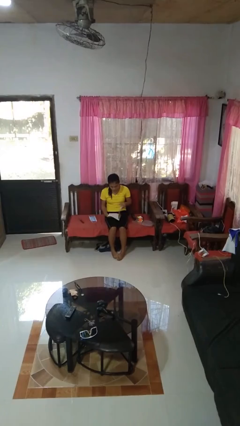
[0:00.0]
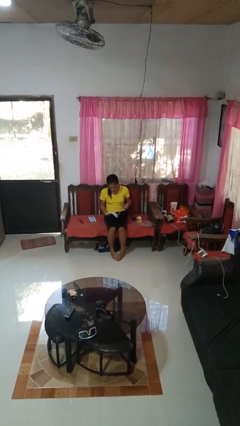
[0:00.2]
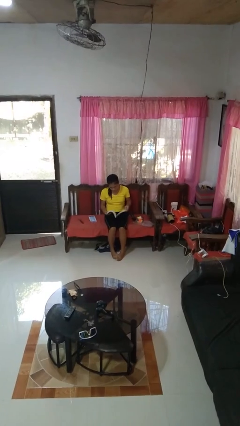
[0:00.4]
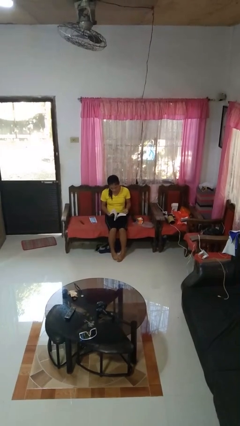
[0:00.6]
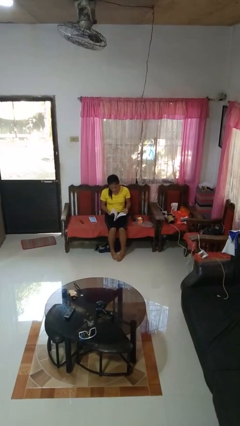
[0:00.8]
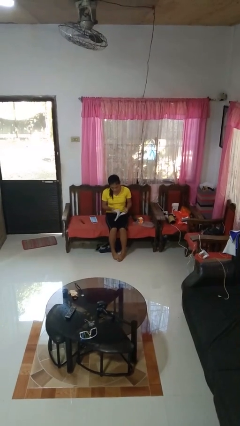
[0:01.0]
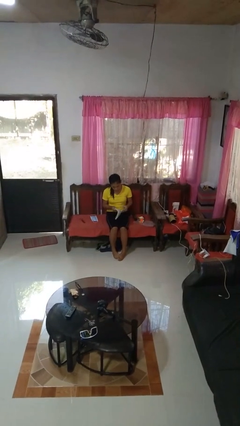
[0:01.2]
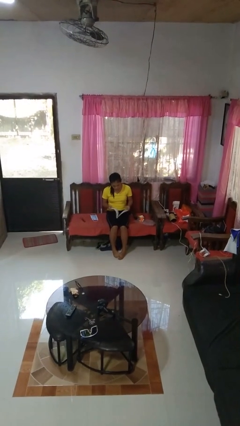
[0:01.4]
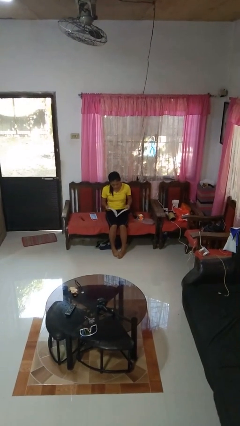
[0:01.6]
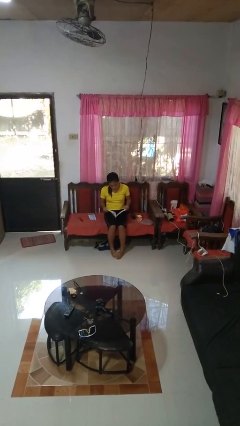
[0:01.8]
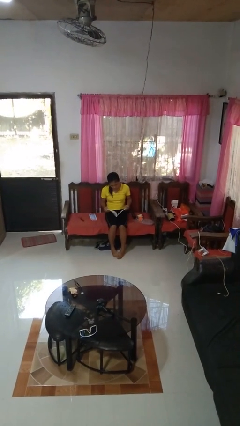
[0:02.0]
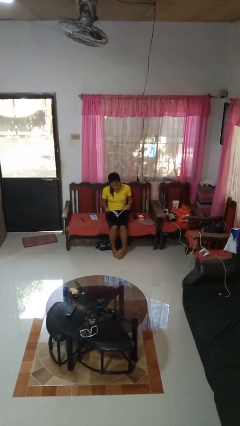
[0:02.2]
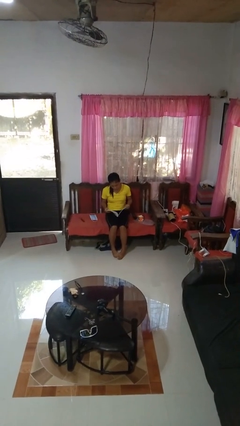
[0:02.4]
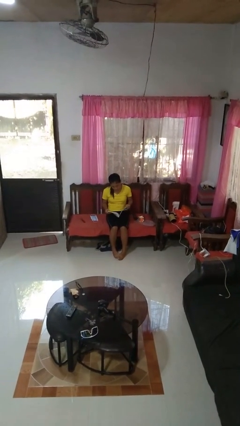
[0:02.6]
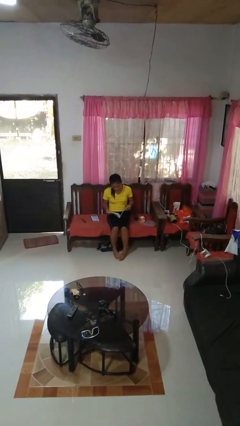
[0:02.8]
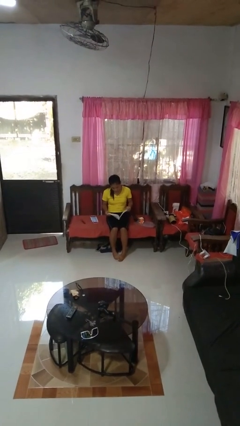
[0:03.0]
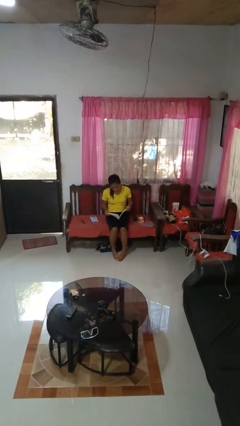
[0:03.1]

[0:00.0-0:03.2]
person reads book

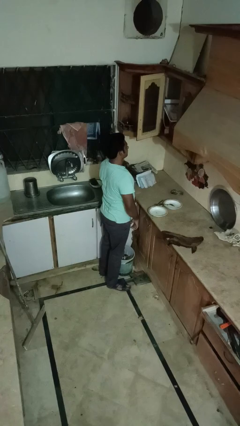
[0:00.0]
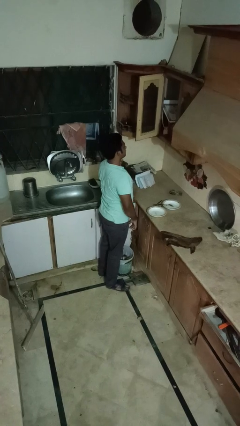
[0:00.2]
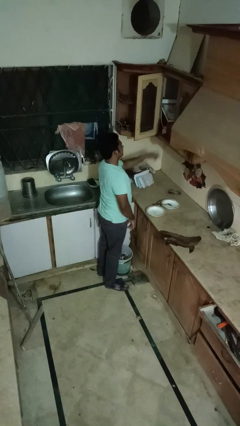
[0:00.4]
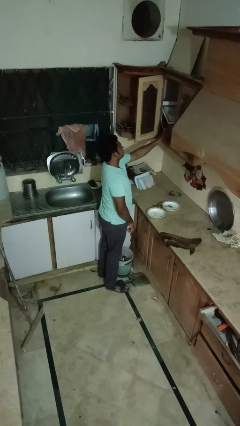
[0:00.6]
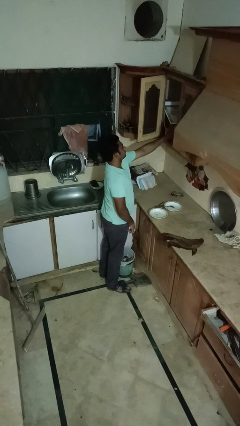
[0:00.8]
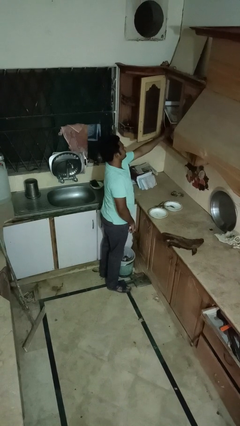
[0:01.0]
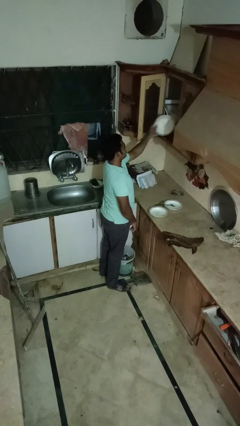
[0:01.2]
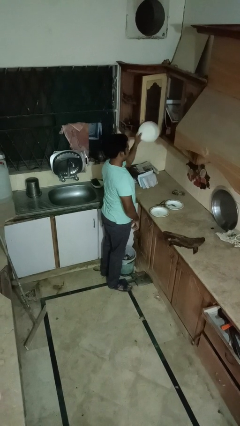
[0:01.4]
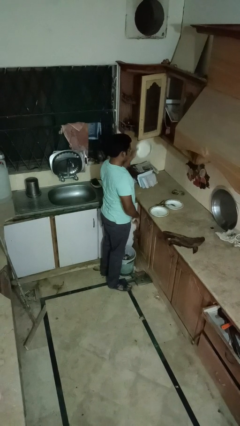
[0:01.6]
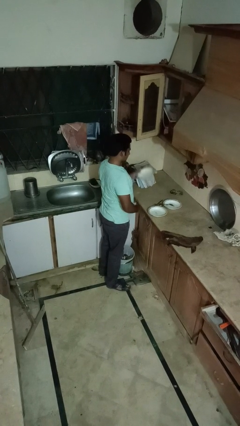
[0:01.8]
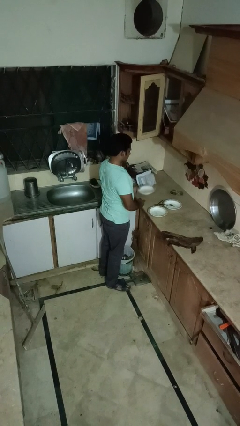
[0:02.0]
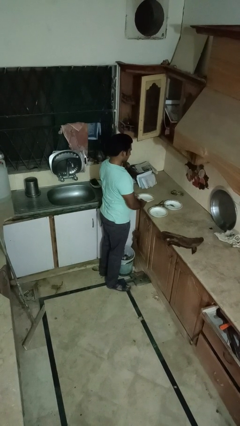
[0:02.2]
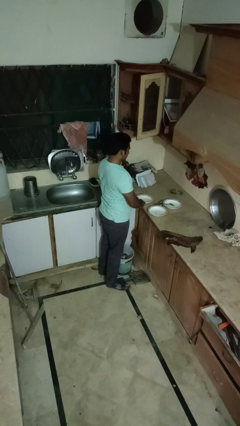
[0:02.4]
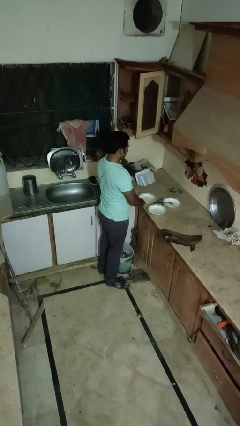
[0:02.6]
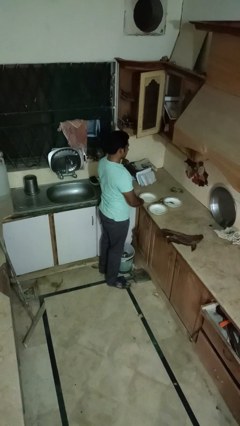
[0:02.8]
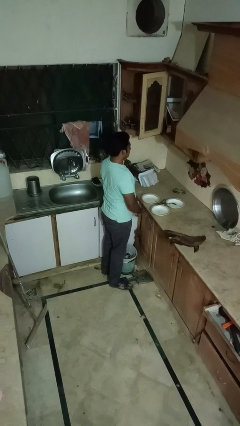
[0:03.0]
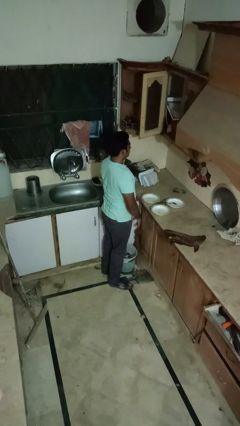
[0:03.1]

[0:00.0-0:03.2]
person takes object from cabinet

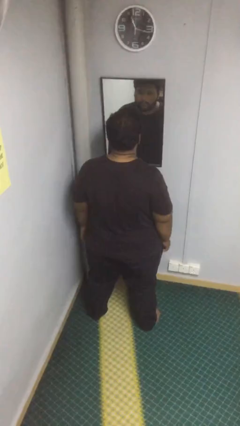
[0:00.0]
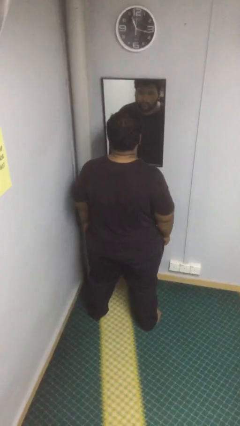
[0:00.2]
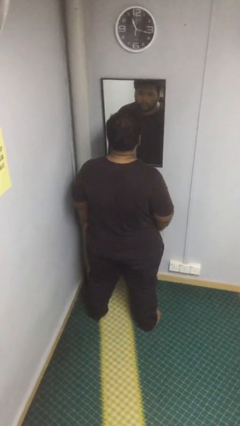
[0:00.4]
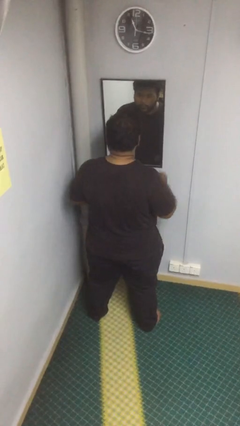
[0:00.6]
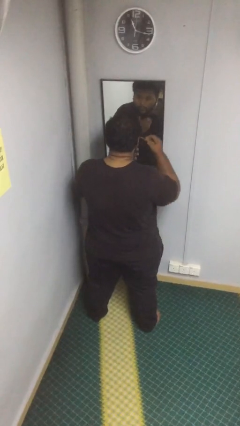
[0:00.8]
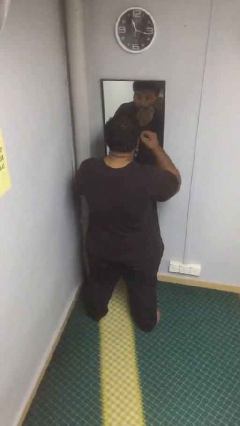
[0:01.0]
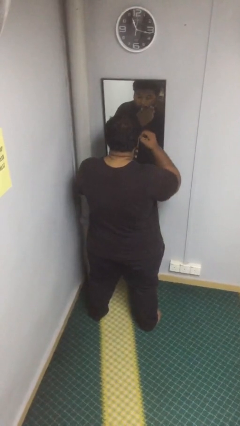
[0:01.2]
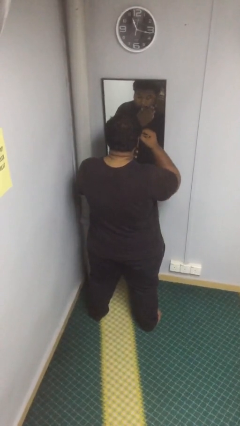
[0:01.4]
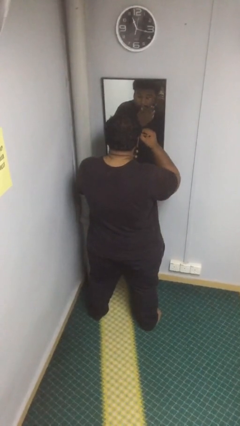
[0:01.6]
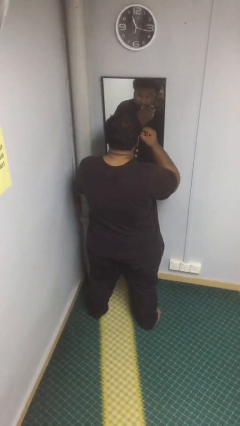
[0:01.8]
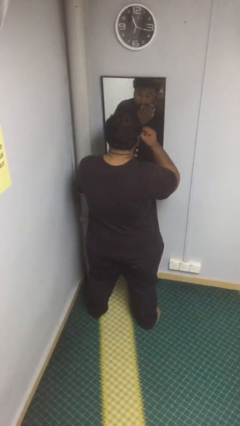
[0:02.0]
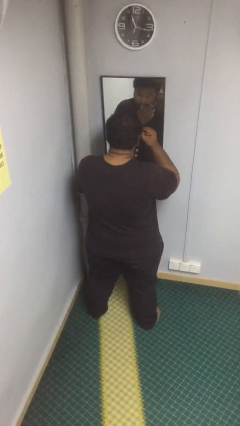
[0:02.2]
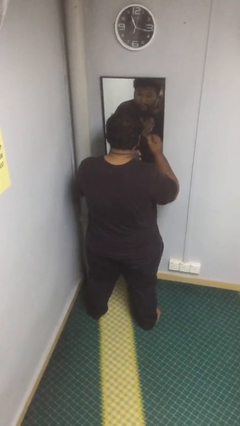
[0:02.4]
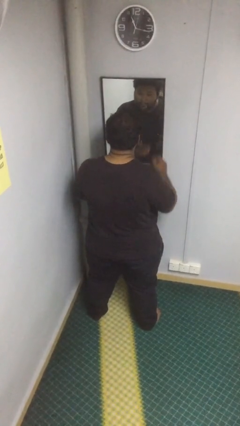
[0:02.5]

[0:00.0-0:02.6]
person applies eye makeup

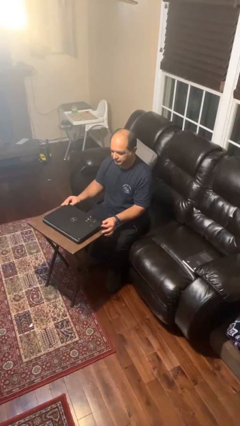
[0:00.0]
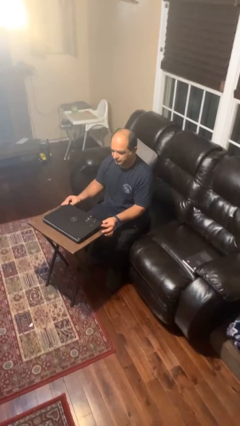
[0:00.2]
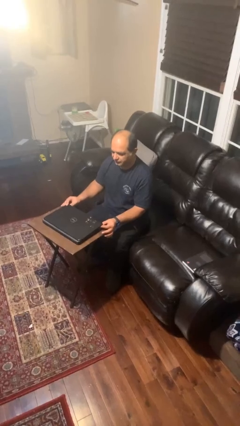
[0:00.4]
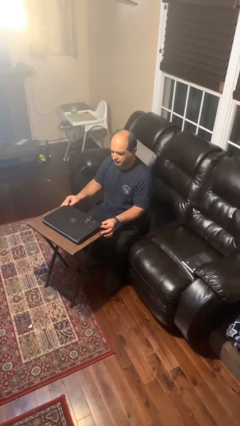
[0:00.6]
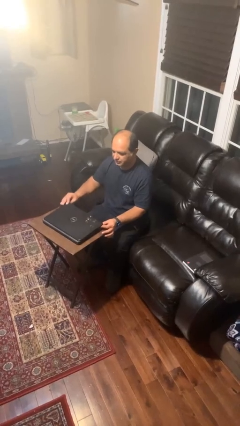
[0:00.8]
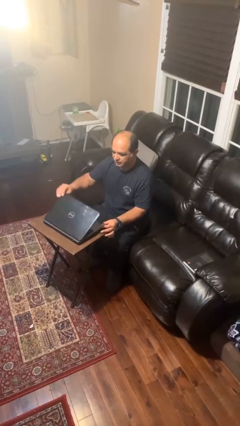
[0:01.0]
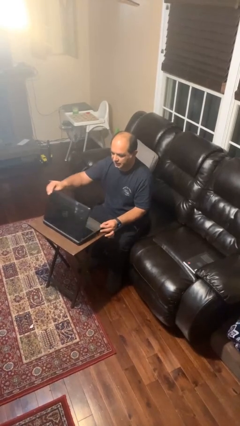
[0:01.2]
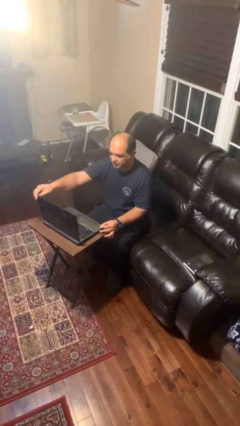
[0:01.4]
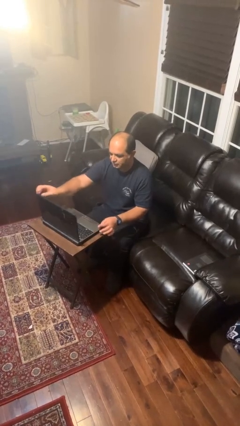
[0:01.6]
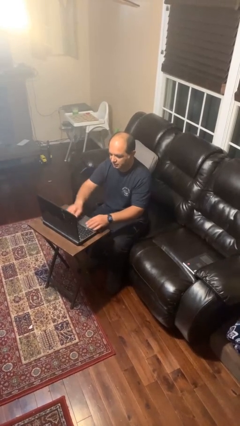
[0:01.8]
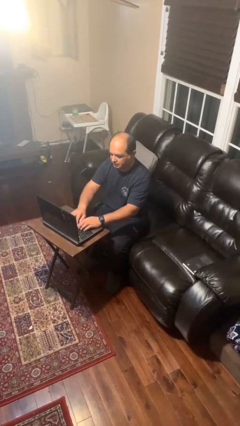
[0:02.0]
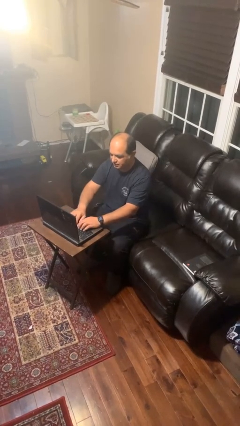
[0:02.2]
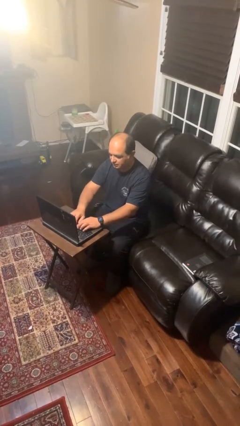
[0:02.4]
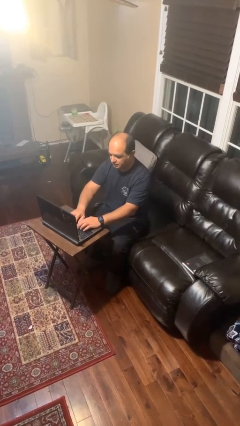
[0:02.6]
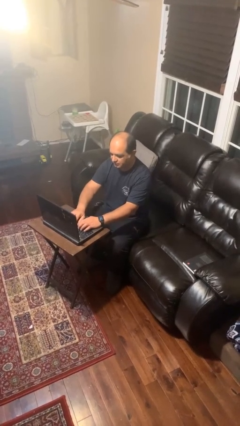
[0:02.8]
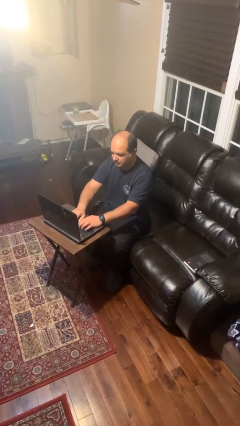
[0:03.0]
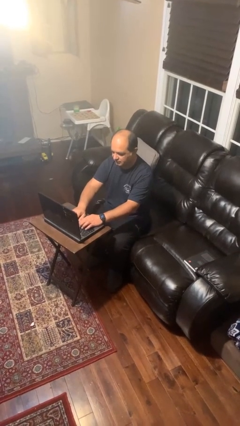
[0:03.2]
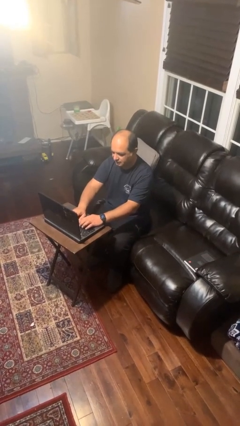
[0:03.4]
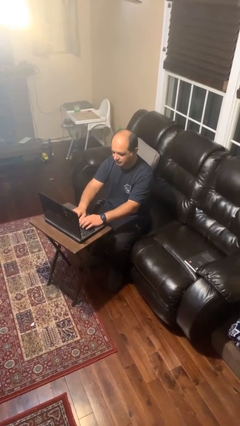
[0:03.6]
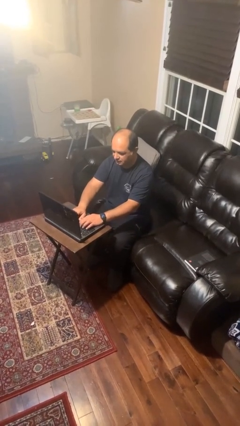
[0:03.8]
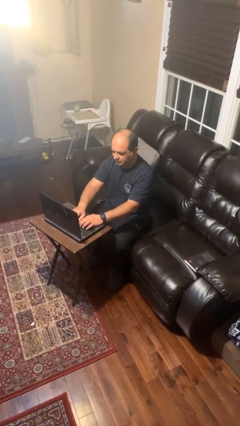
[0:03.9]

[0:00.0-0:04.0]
person interacts with laptop

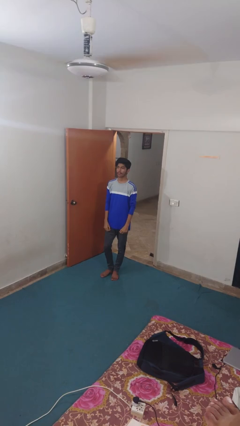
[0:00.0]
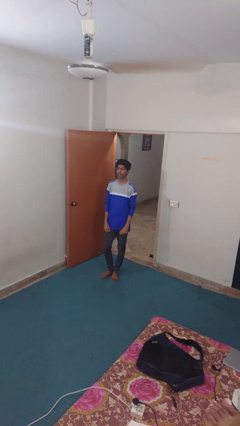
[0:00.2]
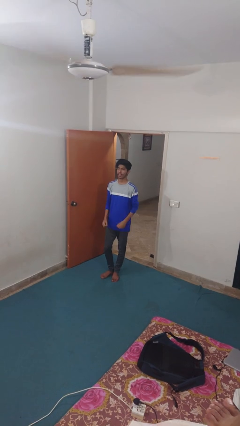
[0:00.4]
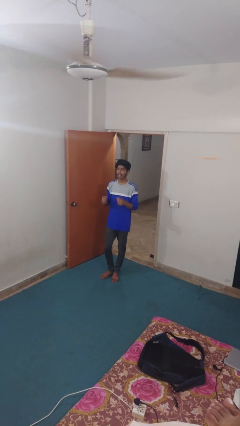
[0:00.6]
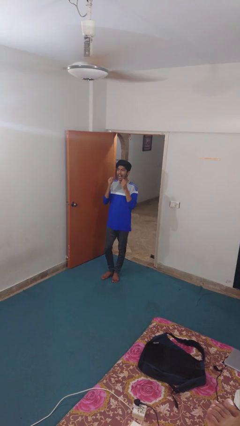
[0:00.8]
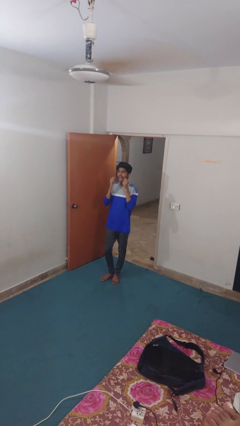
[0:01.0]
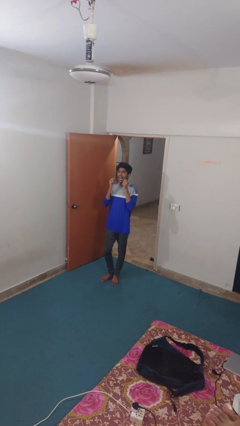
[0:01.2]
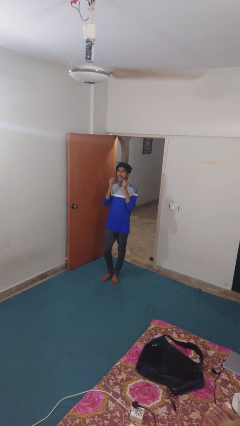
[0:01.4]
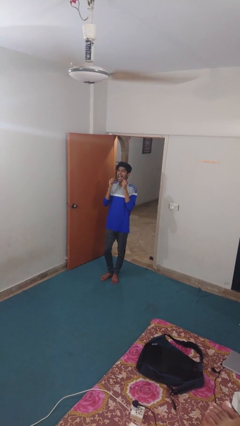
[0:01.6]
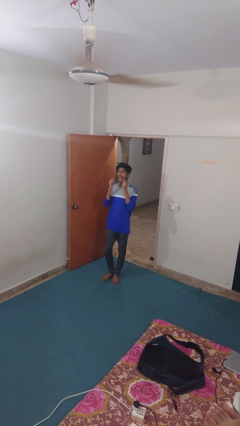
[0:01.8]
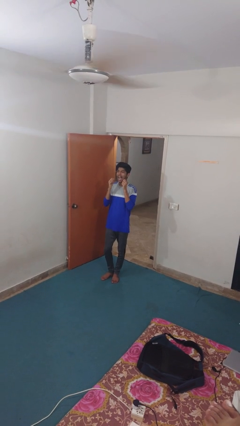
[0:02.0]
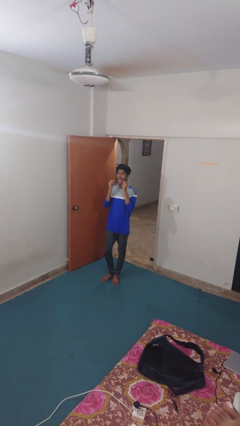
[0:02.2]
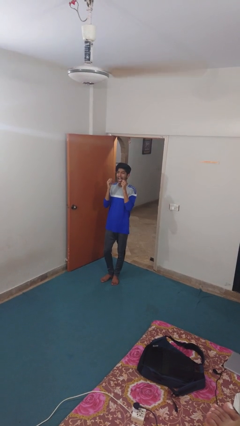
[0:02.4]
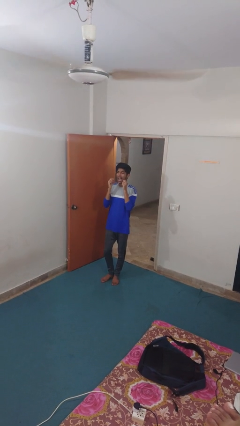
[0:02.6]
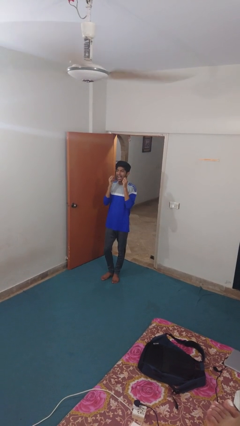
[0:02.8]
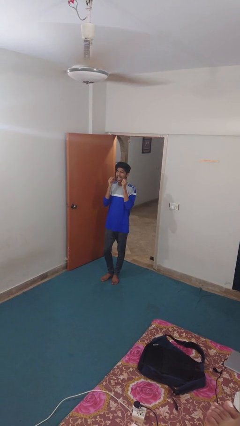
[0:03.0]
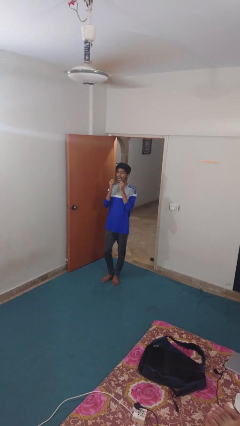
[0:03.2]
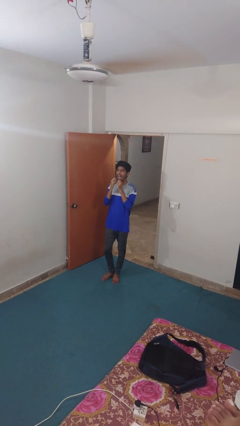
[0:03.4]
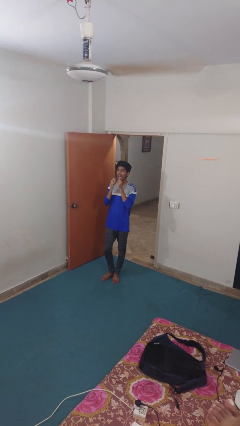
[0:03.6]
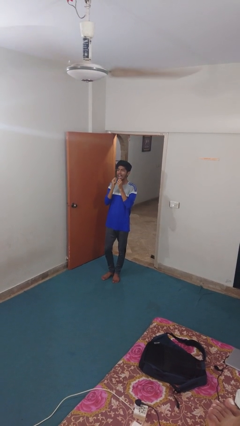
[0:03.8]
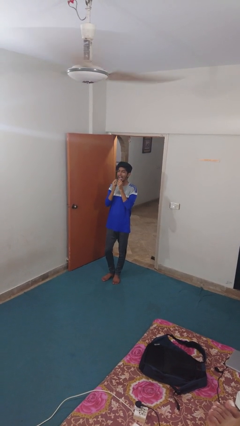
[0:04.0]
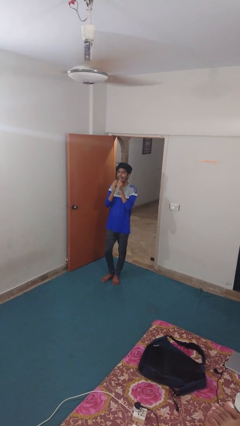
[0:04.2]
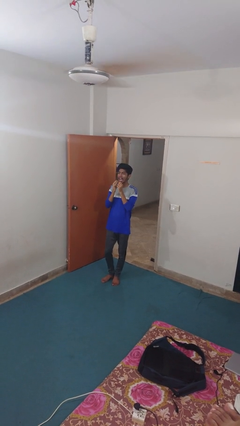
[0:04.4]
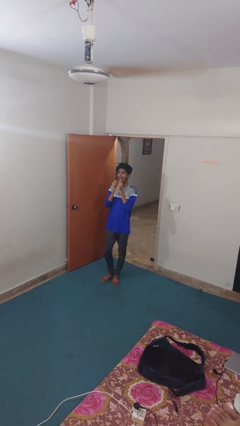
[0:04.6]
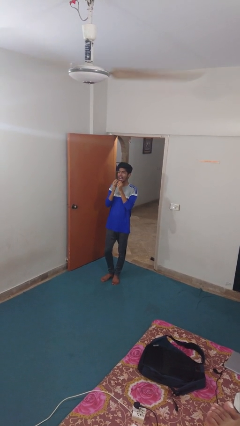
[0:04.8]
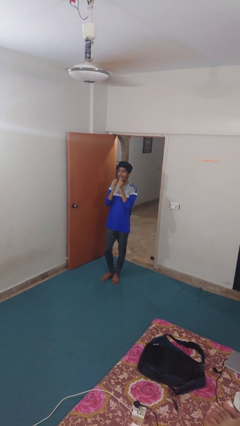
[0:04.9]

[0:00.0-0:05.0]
person flosses
